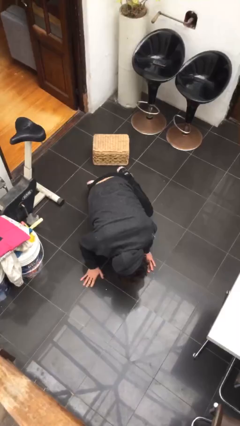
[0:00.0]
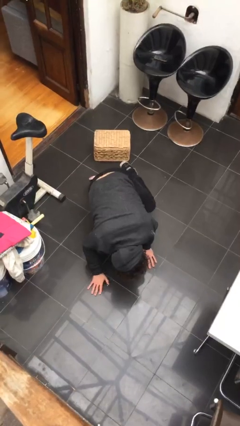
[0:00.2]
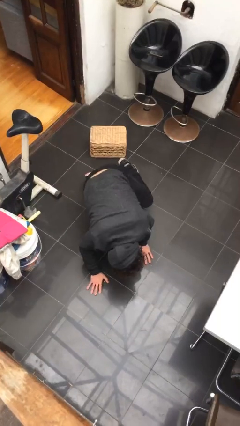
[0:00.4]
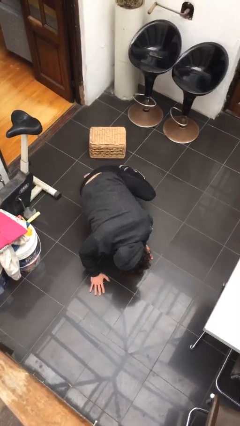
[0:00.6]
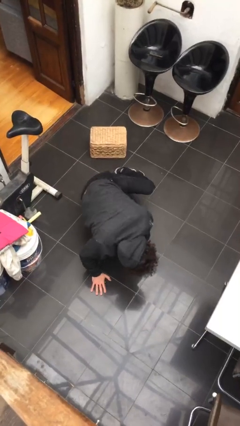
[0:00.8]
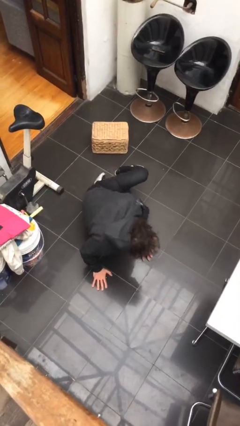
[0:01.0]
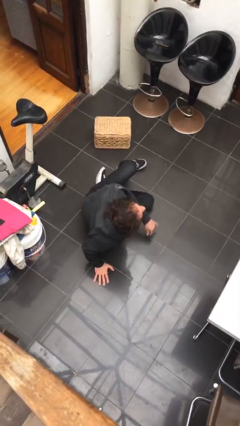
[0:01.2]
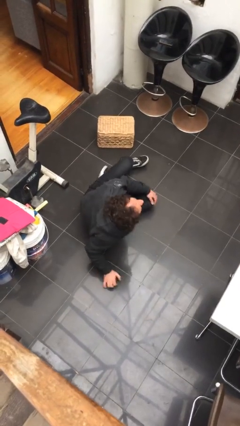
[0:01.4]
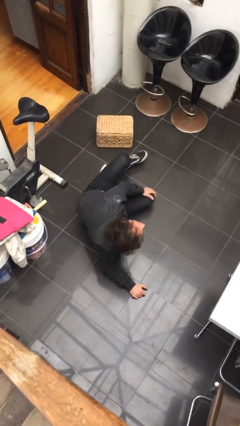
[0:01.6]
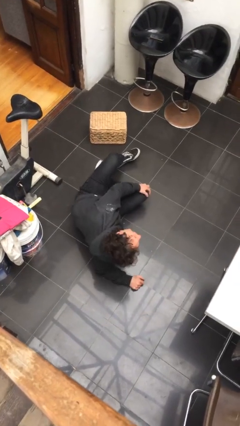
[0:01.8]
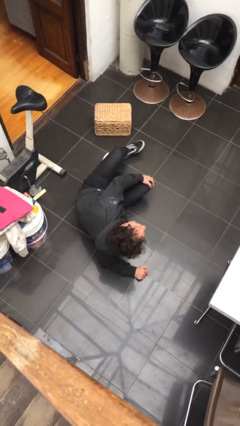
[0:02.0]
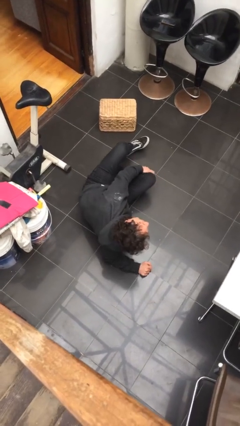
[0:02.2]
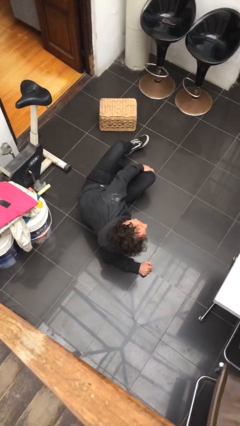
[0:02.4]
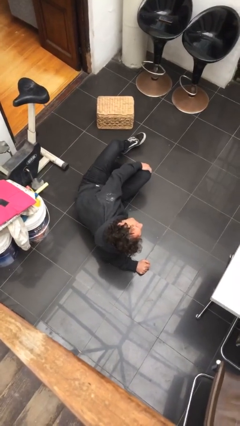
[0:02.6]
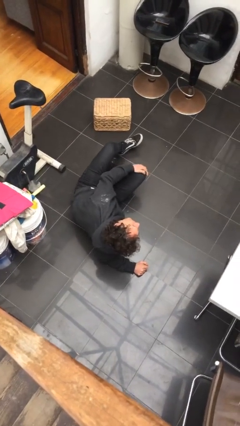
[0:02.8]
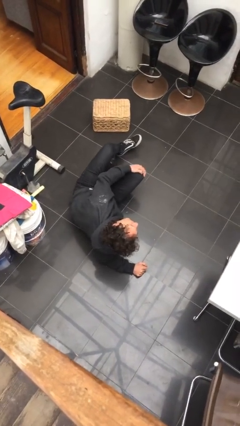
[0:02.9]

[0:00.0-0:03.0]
person lies down on floor

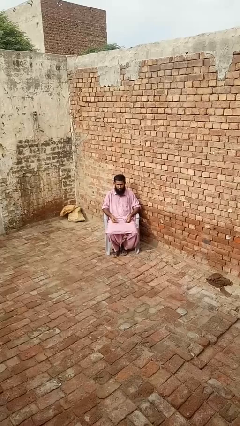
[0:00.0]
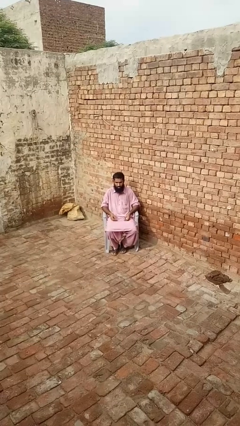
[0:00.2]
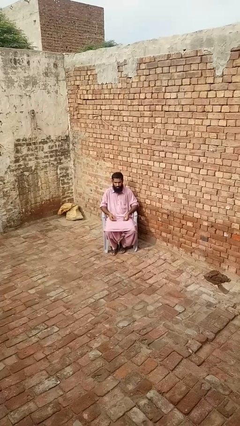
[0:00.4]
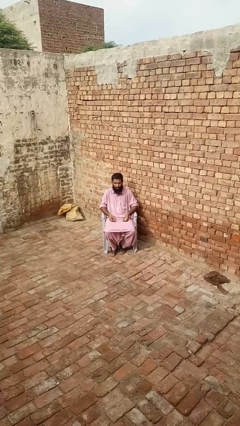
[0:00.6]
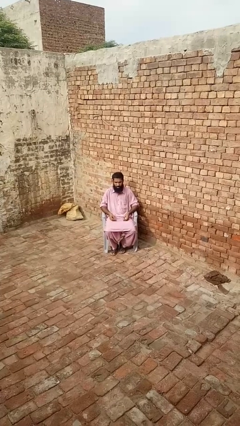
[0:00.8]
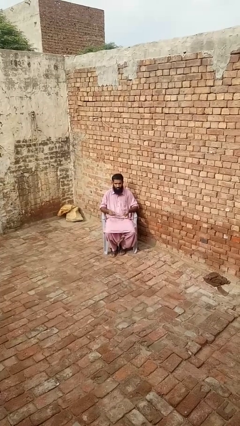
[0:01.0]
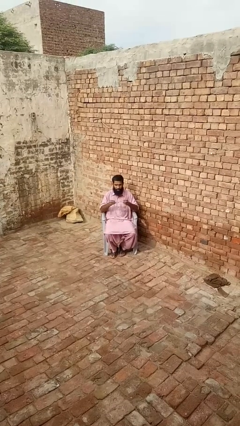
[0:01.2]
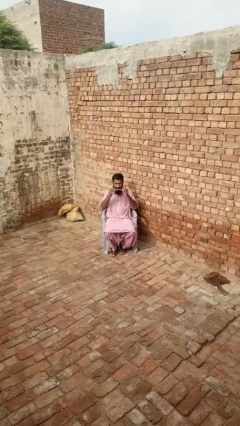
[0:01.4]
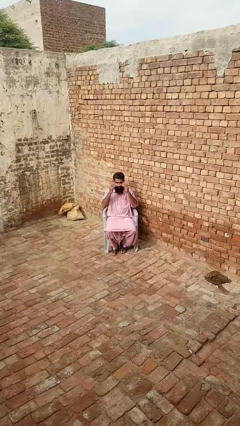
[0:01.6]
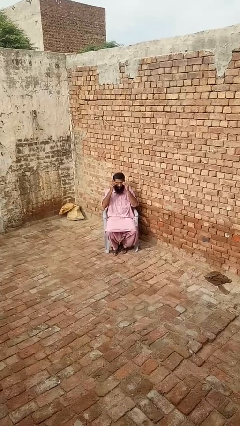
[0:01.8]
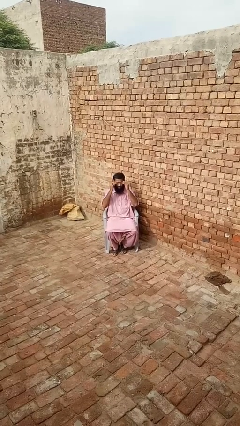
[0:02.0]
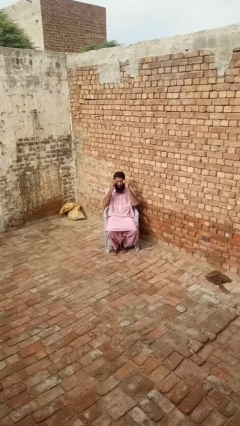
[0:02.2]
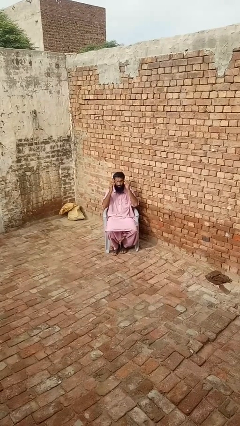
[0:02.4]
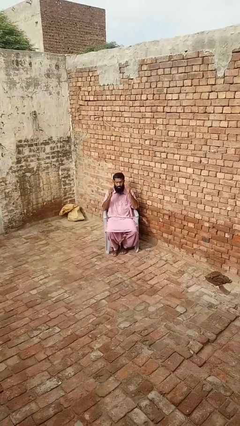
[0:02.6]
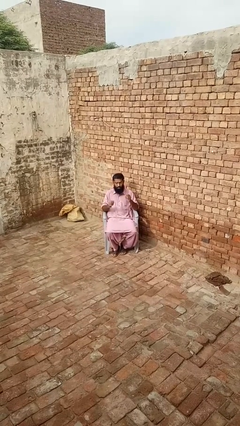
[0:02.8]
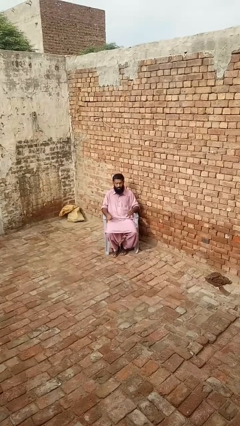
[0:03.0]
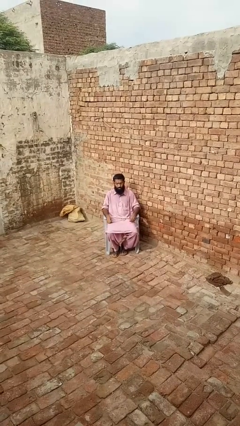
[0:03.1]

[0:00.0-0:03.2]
person puts on glasses

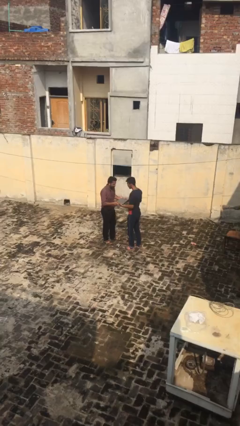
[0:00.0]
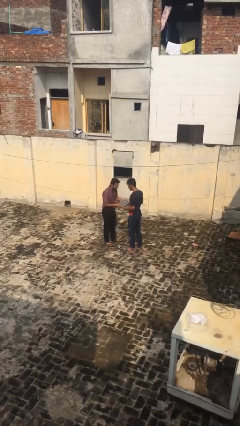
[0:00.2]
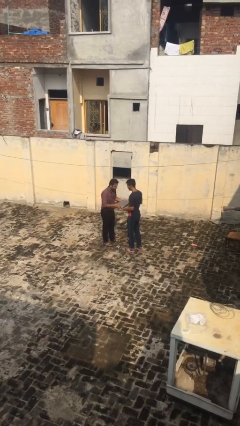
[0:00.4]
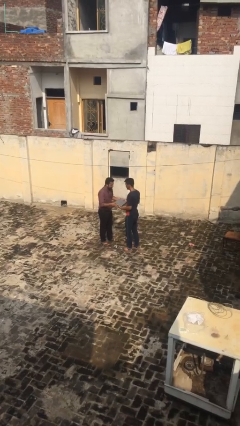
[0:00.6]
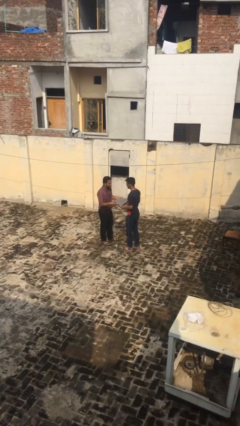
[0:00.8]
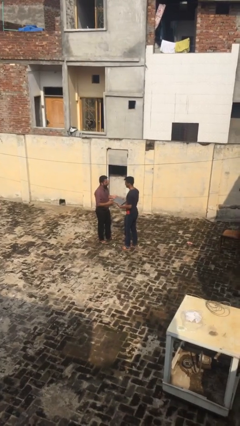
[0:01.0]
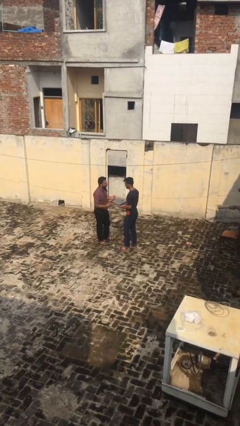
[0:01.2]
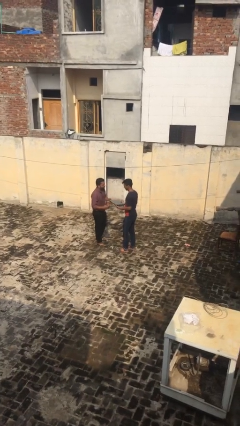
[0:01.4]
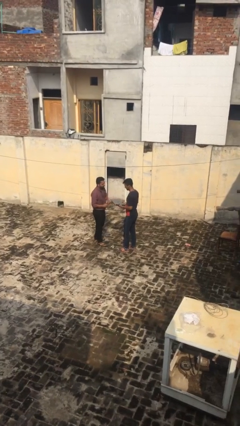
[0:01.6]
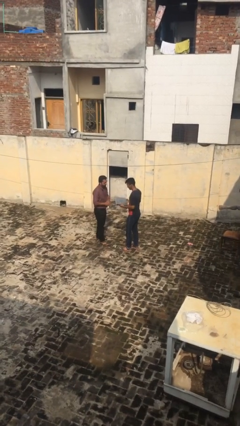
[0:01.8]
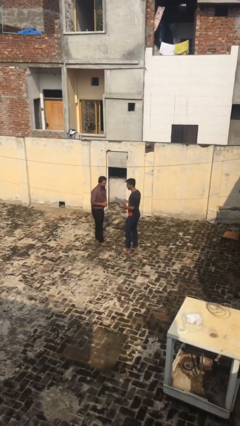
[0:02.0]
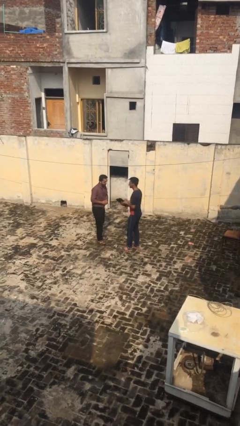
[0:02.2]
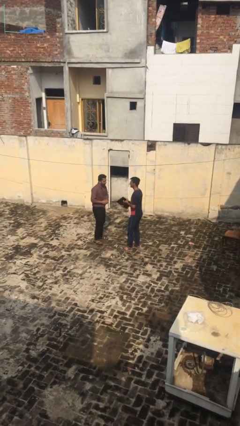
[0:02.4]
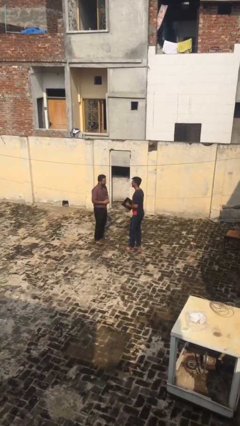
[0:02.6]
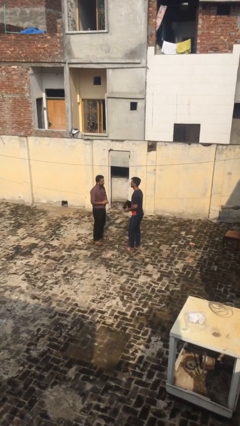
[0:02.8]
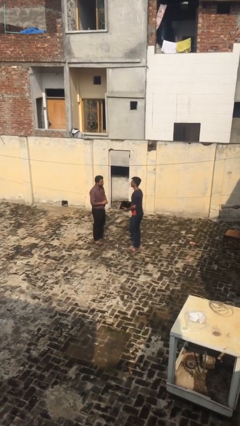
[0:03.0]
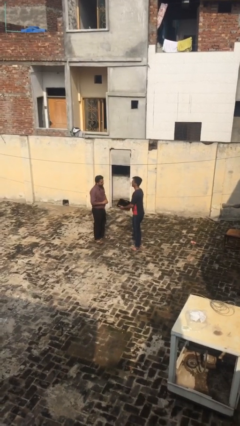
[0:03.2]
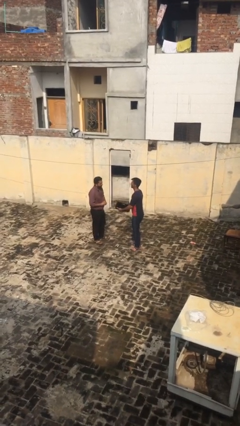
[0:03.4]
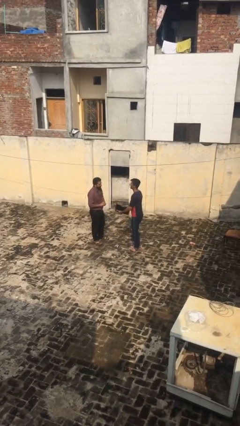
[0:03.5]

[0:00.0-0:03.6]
person transfers object to person

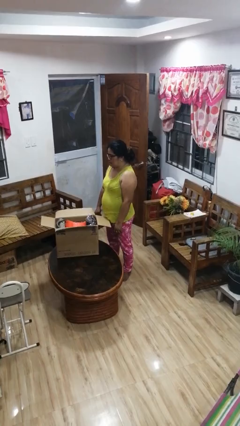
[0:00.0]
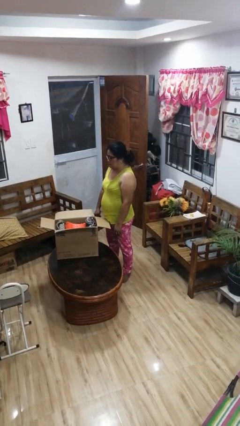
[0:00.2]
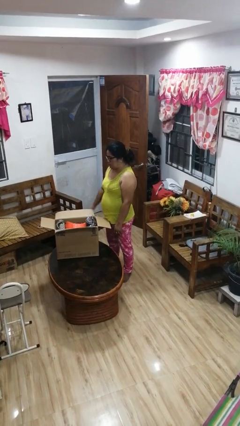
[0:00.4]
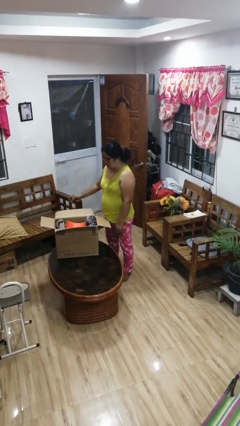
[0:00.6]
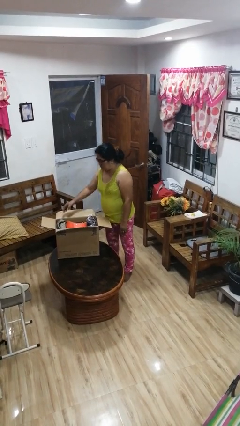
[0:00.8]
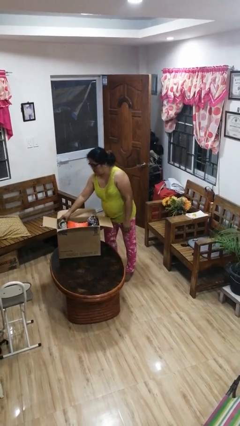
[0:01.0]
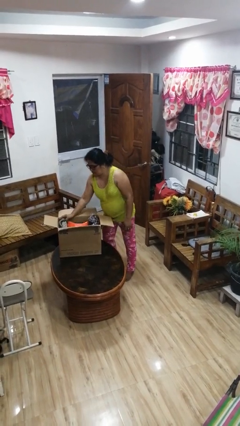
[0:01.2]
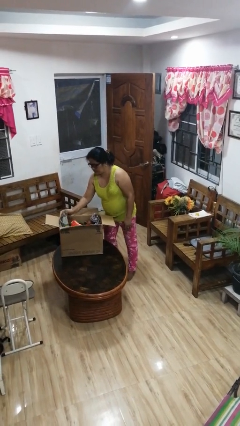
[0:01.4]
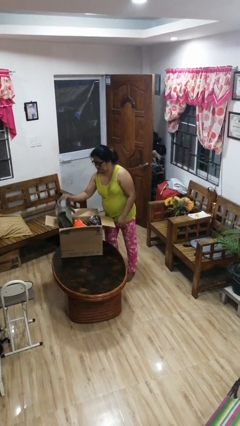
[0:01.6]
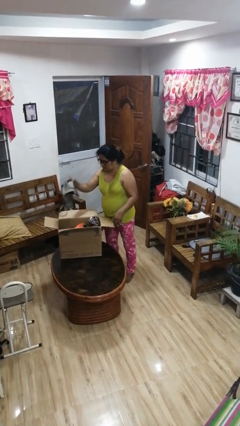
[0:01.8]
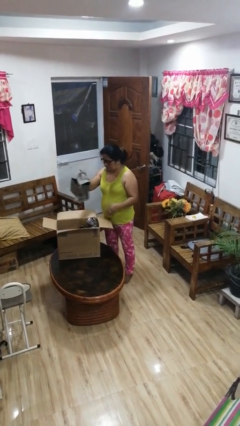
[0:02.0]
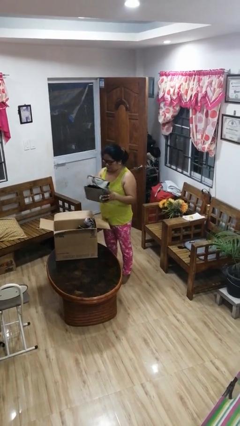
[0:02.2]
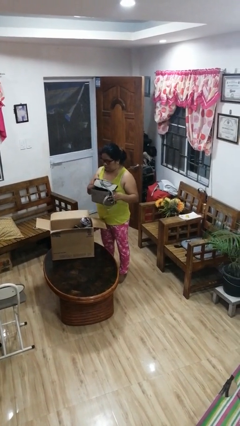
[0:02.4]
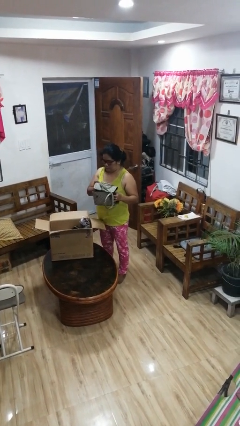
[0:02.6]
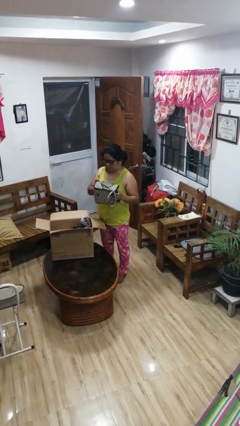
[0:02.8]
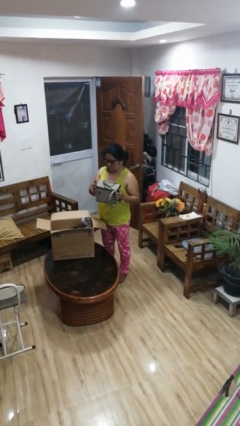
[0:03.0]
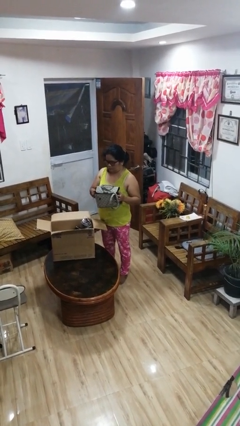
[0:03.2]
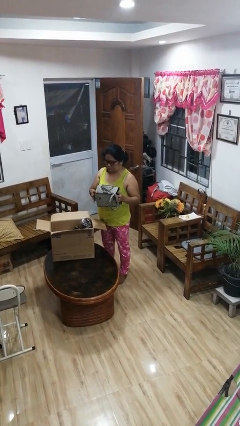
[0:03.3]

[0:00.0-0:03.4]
person takes object from box

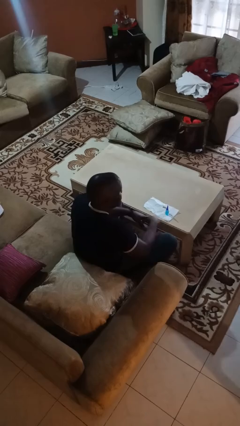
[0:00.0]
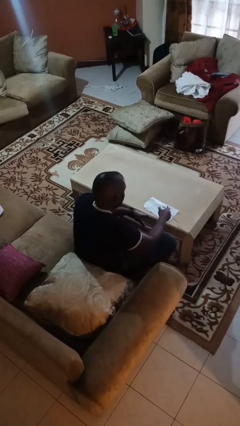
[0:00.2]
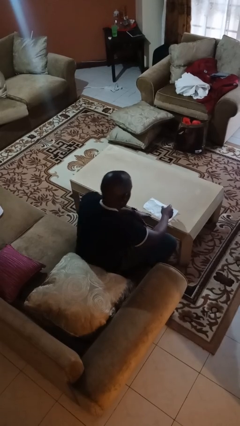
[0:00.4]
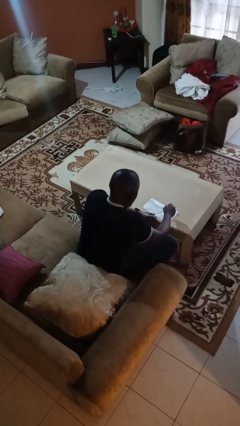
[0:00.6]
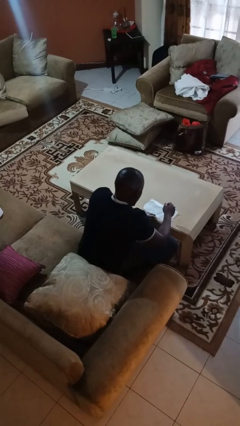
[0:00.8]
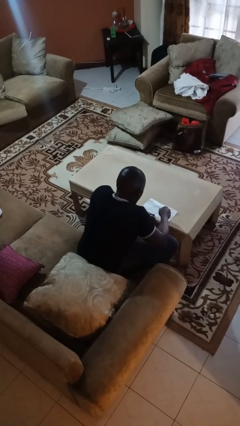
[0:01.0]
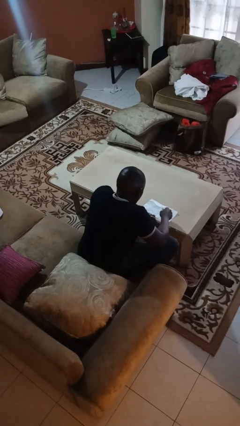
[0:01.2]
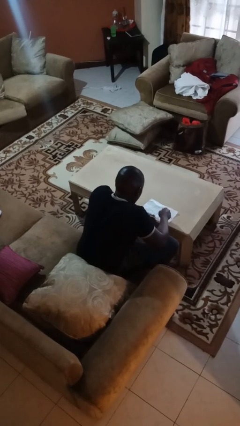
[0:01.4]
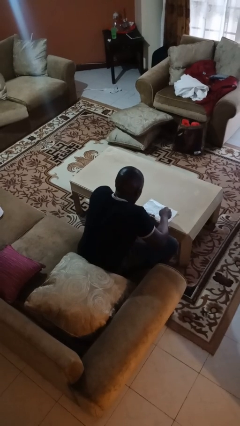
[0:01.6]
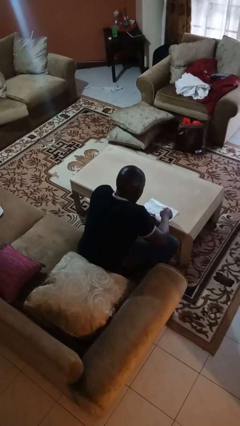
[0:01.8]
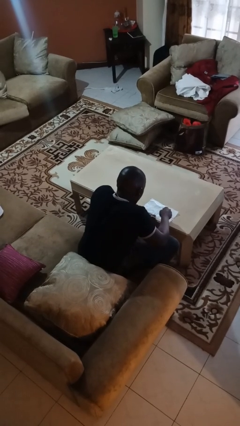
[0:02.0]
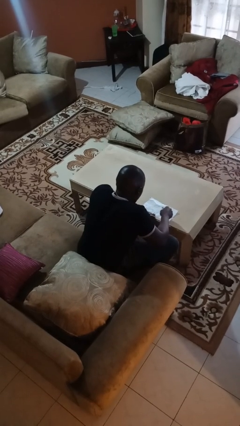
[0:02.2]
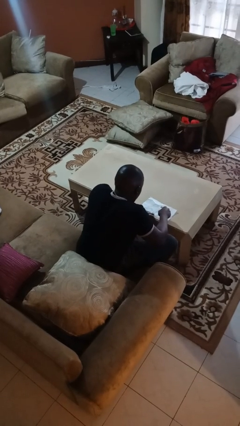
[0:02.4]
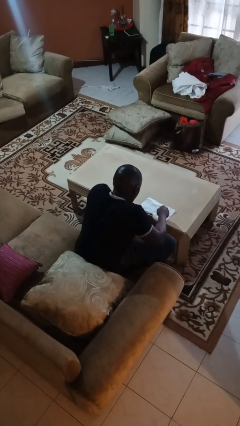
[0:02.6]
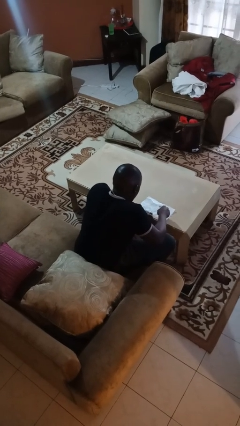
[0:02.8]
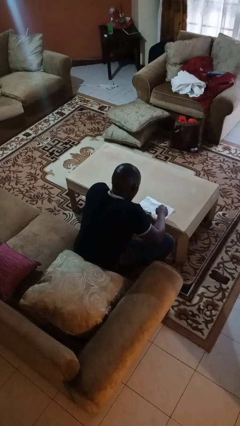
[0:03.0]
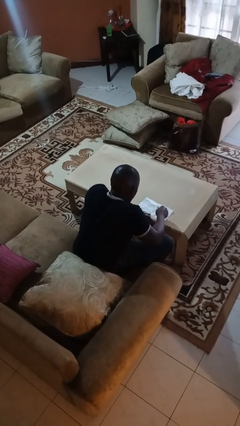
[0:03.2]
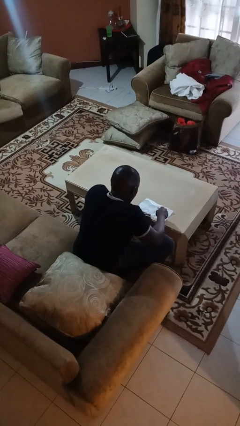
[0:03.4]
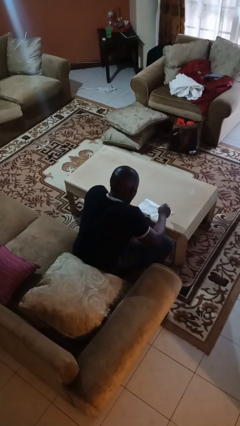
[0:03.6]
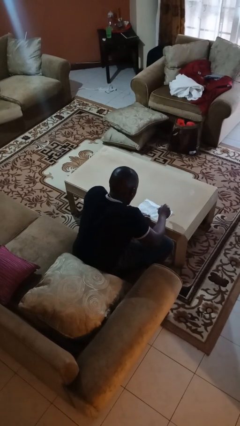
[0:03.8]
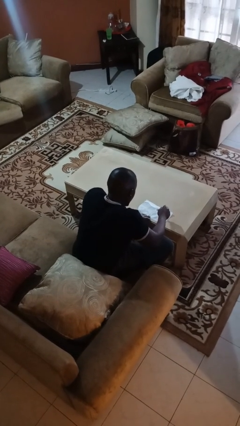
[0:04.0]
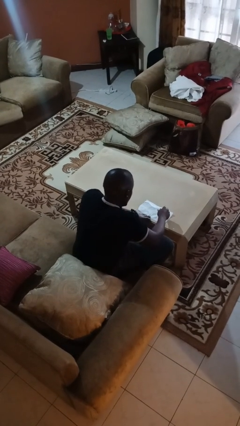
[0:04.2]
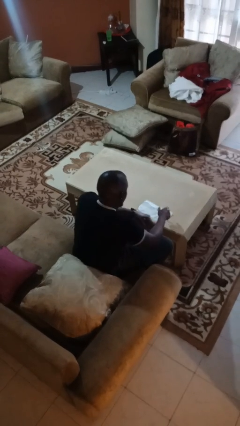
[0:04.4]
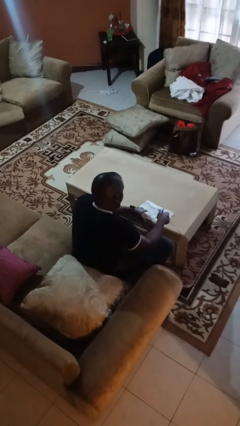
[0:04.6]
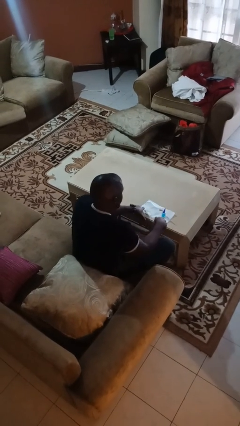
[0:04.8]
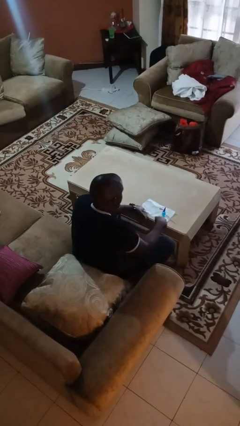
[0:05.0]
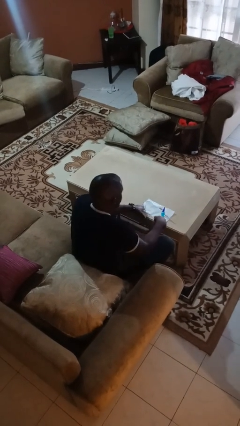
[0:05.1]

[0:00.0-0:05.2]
person paints fingernails
